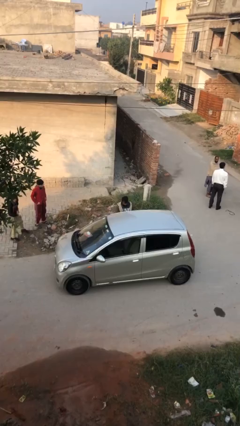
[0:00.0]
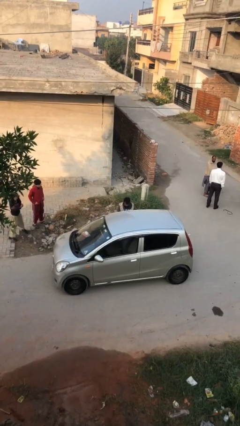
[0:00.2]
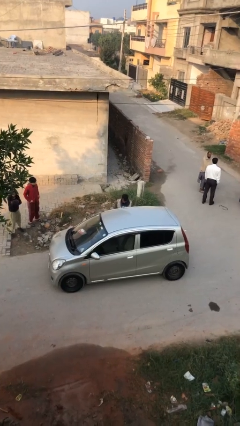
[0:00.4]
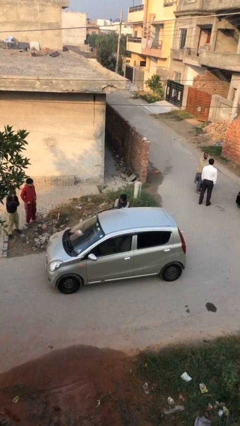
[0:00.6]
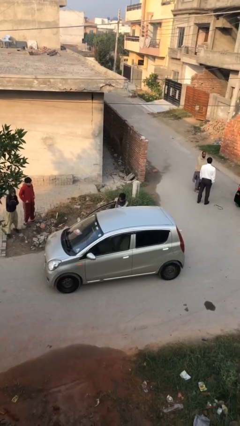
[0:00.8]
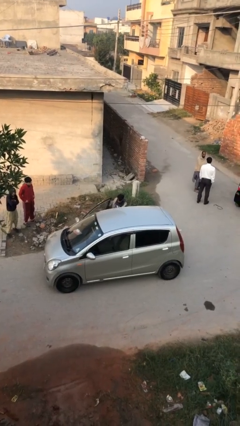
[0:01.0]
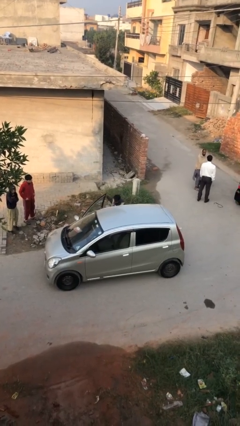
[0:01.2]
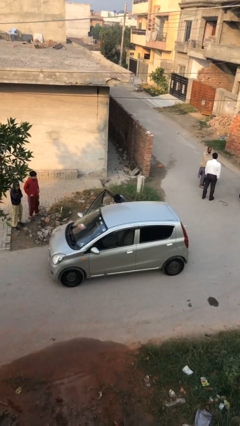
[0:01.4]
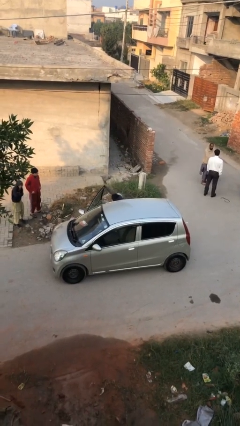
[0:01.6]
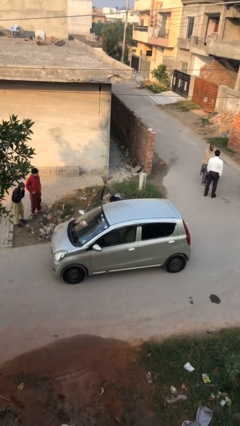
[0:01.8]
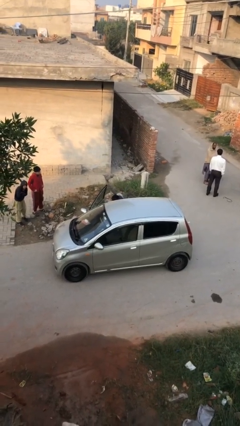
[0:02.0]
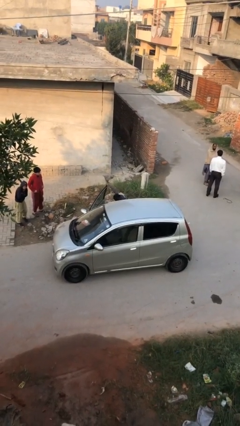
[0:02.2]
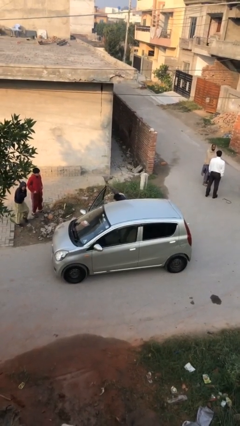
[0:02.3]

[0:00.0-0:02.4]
person opens car door

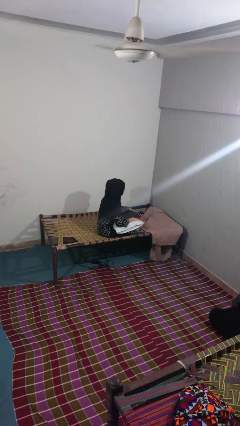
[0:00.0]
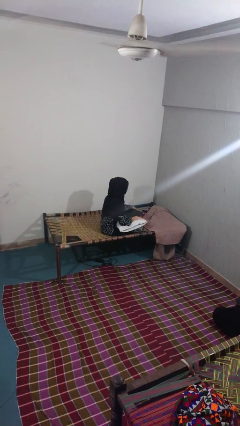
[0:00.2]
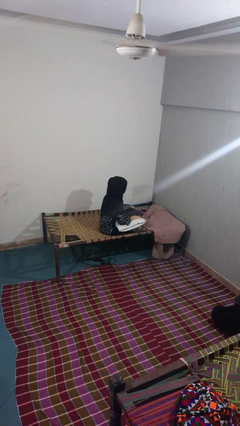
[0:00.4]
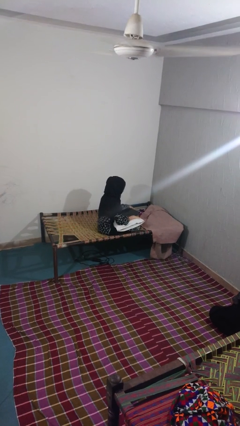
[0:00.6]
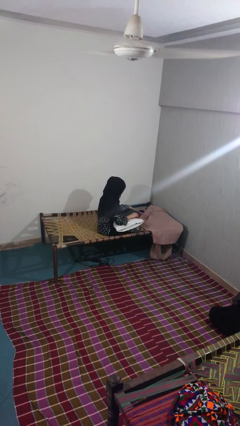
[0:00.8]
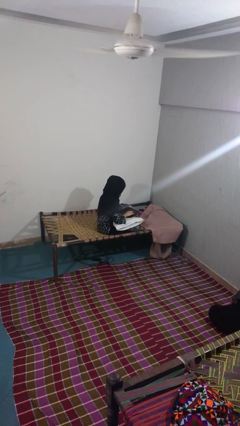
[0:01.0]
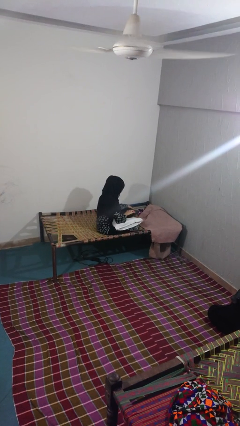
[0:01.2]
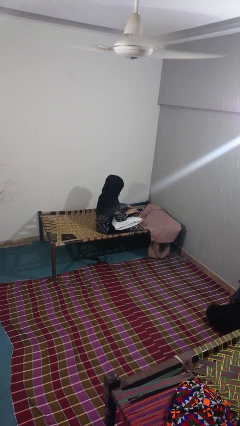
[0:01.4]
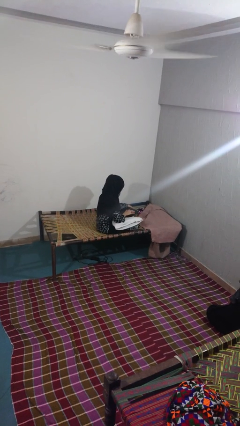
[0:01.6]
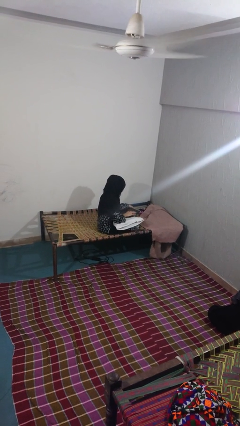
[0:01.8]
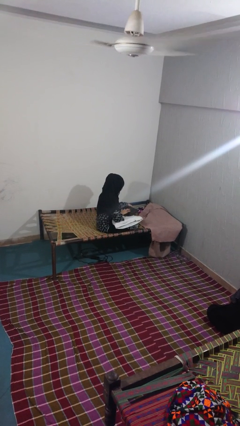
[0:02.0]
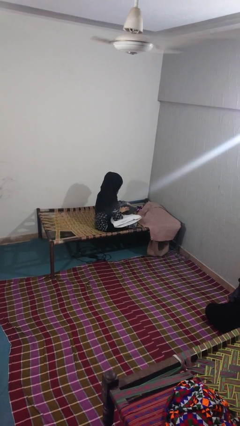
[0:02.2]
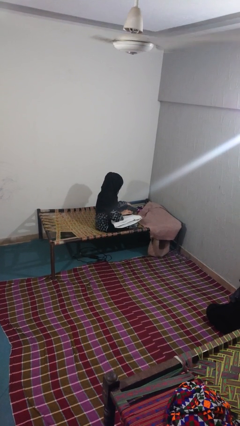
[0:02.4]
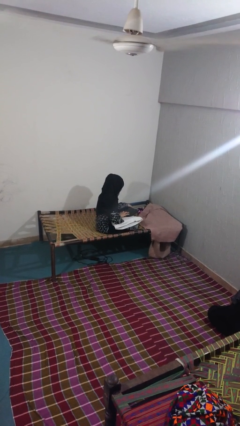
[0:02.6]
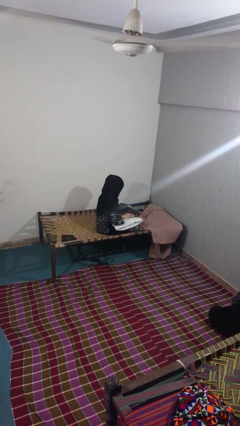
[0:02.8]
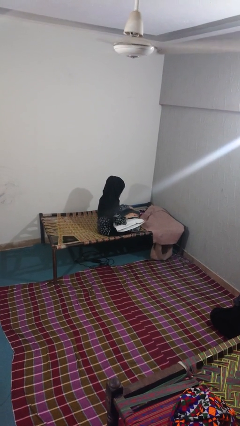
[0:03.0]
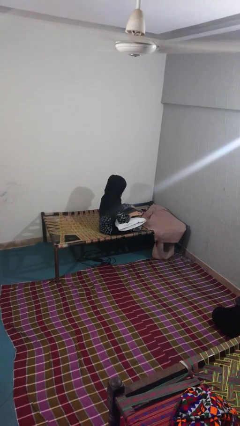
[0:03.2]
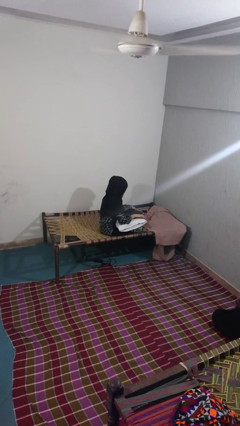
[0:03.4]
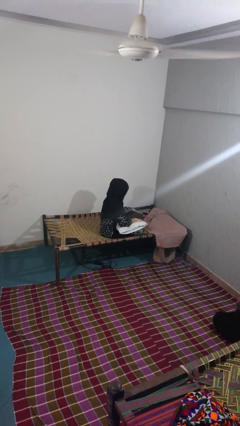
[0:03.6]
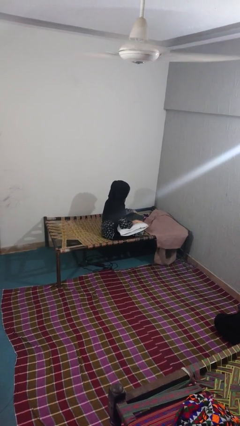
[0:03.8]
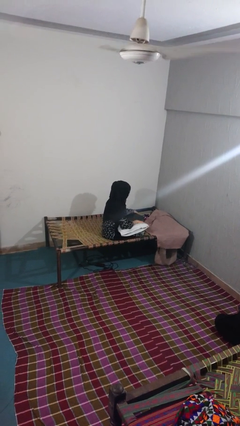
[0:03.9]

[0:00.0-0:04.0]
person interacts with tablet

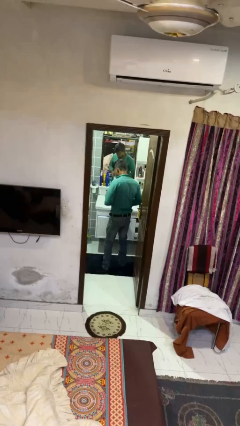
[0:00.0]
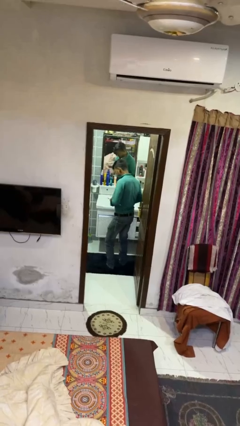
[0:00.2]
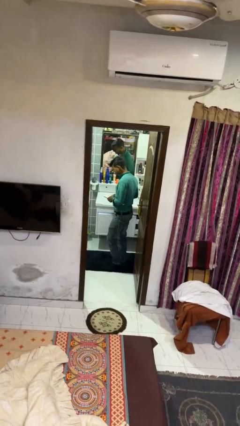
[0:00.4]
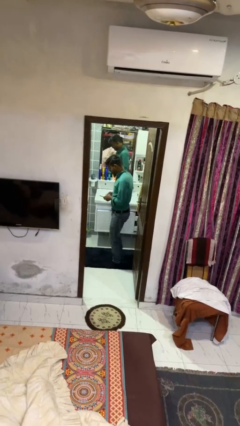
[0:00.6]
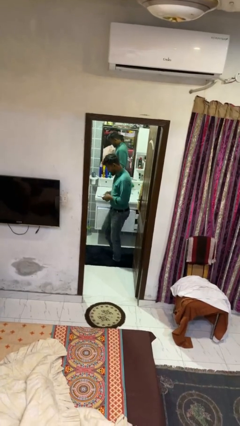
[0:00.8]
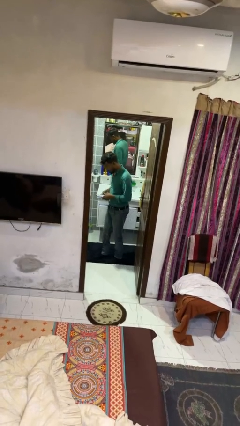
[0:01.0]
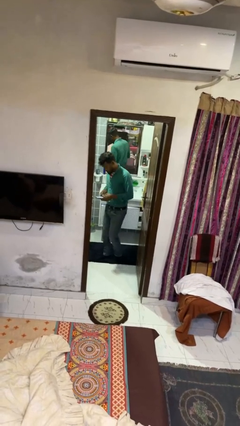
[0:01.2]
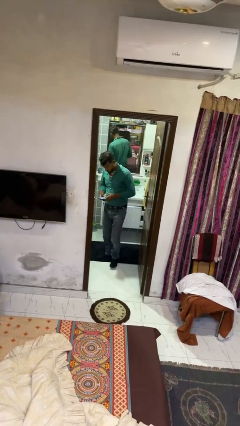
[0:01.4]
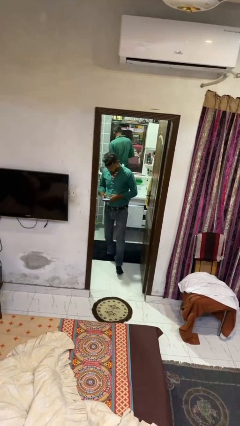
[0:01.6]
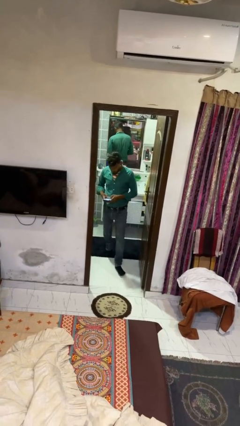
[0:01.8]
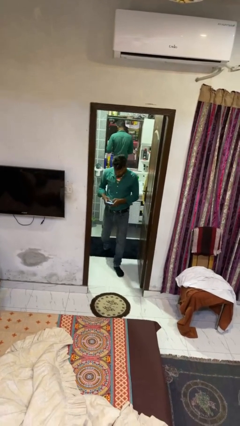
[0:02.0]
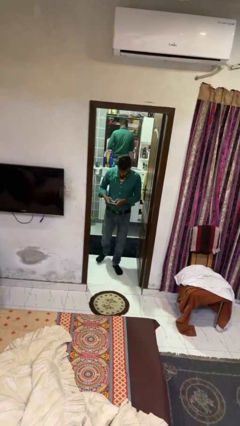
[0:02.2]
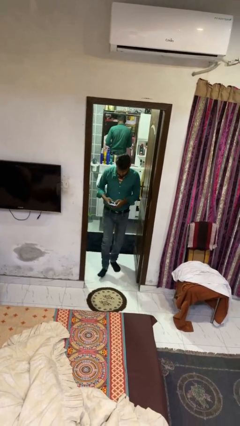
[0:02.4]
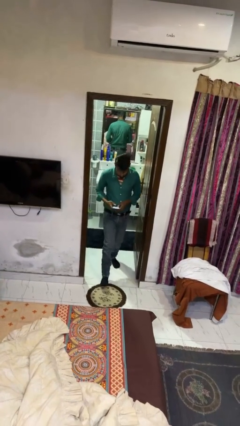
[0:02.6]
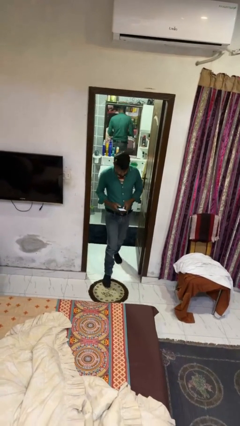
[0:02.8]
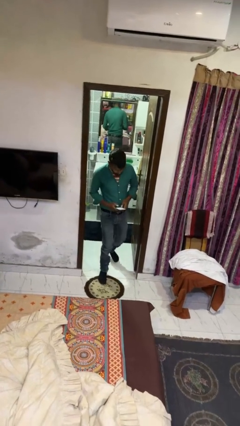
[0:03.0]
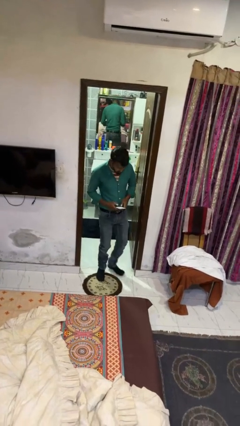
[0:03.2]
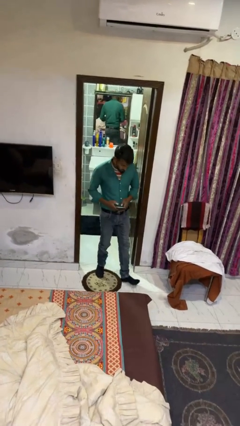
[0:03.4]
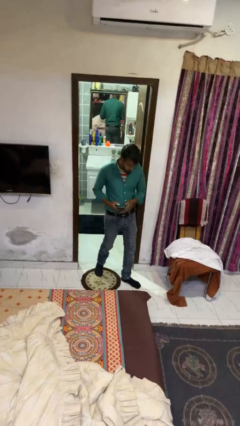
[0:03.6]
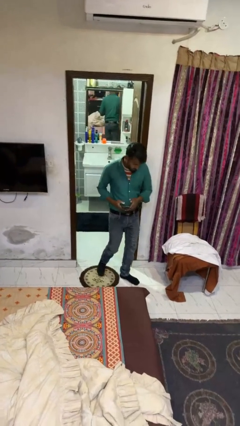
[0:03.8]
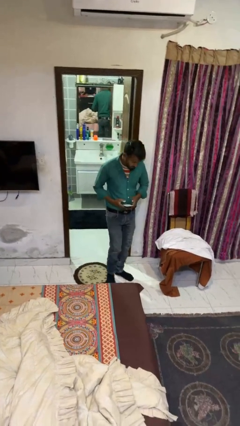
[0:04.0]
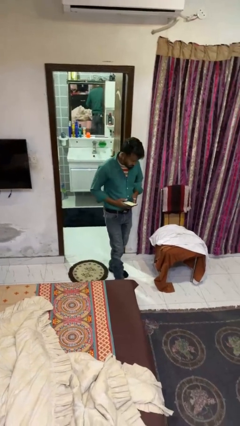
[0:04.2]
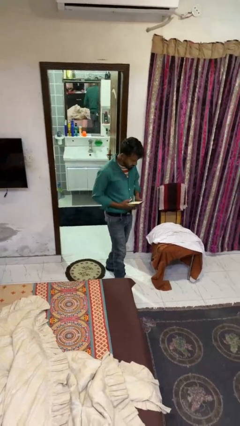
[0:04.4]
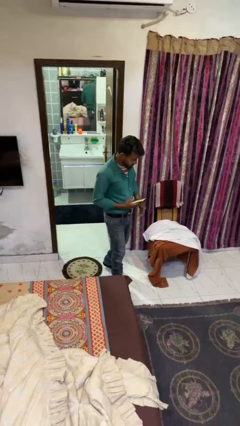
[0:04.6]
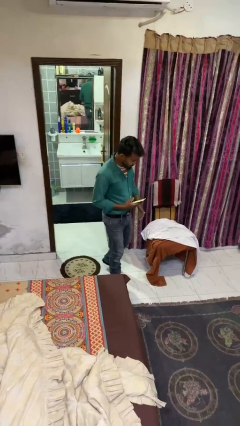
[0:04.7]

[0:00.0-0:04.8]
person enters scene through structure

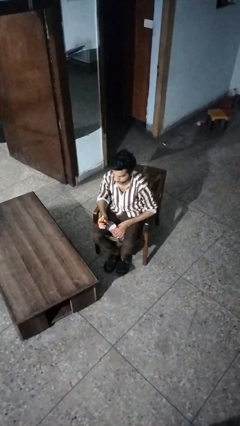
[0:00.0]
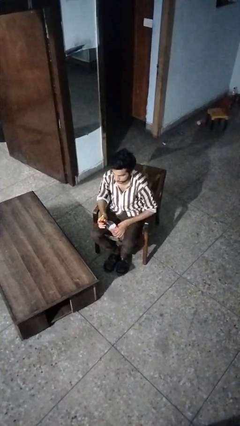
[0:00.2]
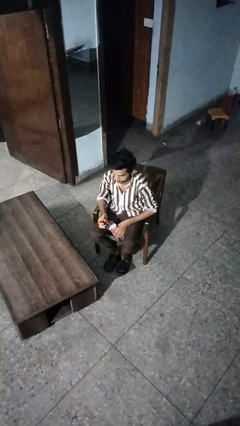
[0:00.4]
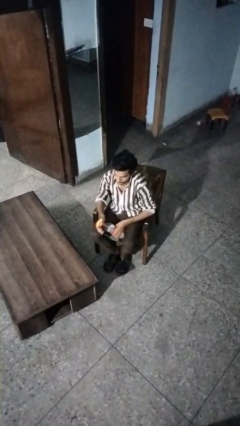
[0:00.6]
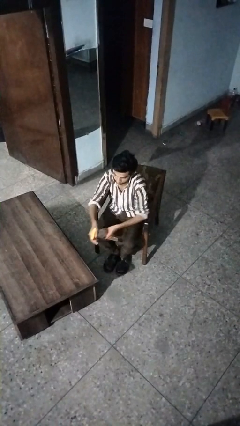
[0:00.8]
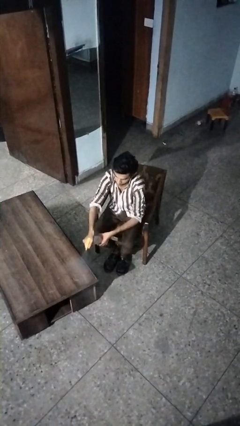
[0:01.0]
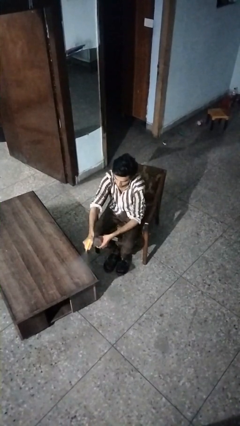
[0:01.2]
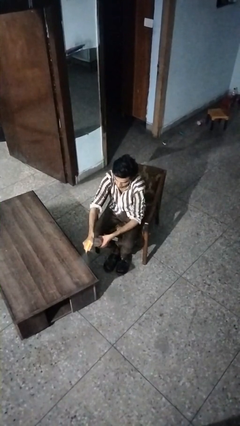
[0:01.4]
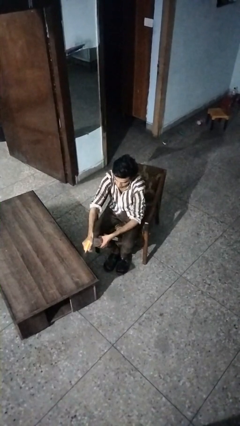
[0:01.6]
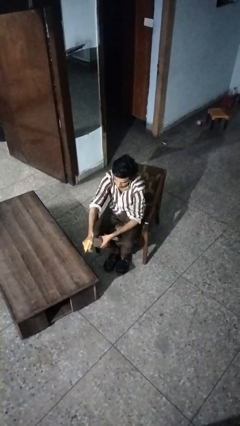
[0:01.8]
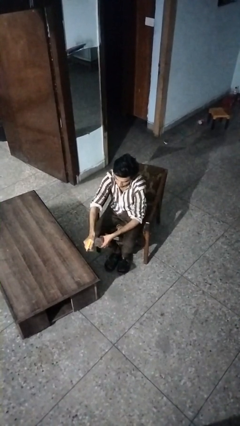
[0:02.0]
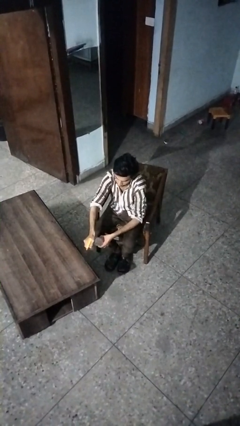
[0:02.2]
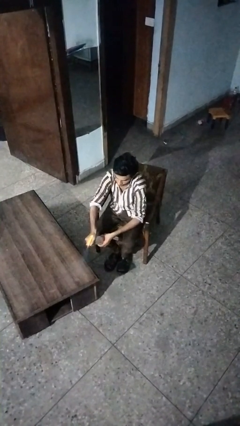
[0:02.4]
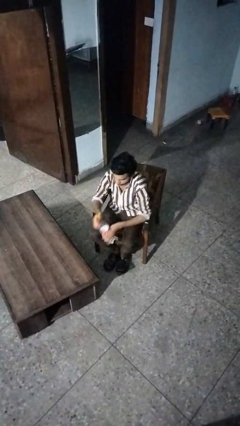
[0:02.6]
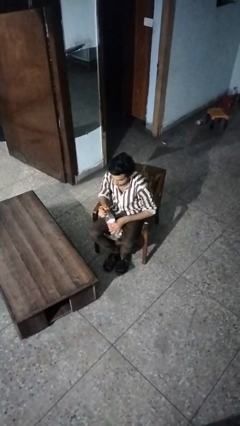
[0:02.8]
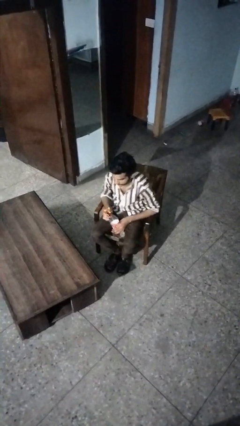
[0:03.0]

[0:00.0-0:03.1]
person sprays from bottle

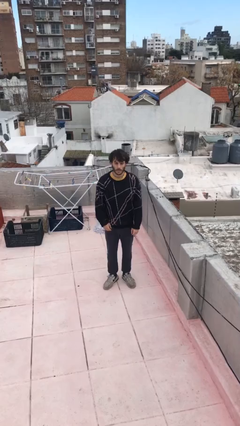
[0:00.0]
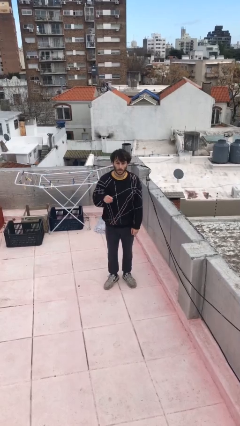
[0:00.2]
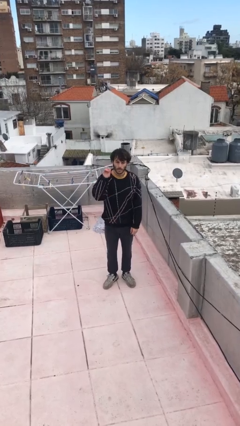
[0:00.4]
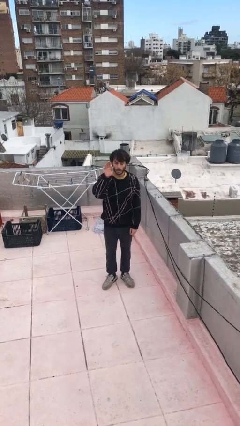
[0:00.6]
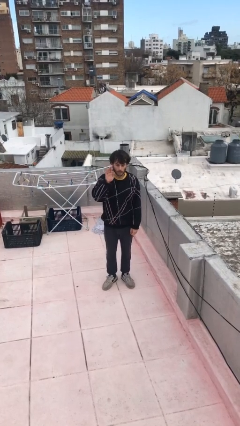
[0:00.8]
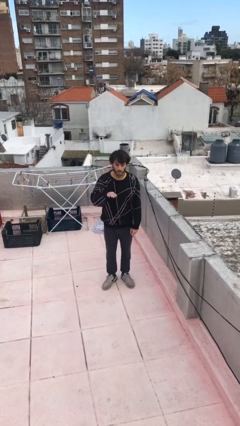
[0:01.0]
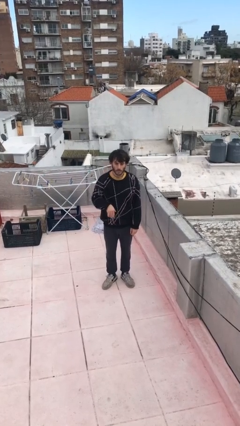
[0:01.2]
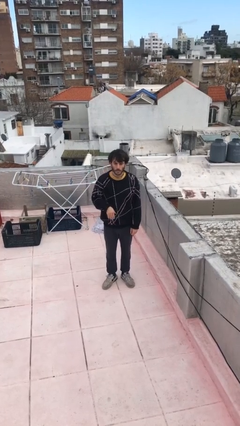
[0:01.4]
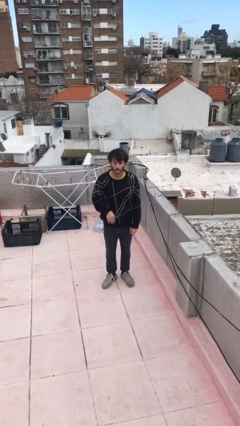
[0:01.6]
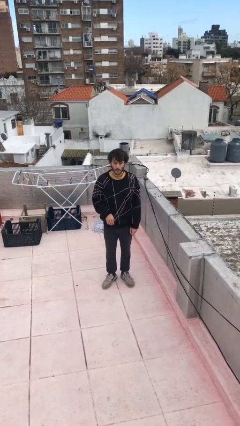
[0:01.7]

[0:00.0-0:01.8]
person gestures swipe down

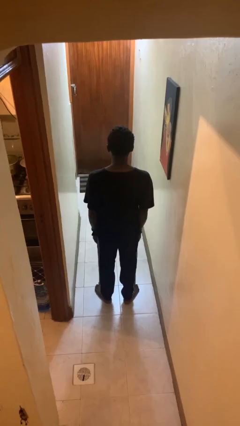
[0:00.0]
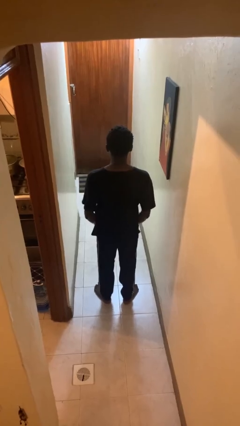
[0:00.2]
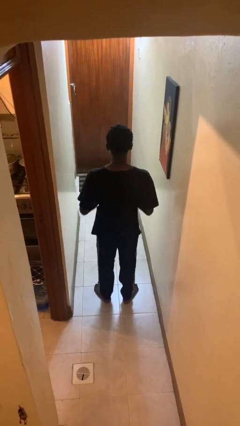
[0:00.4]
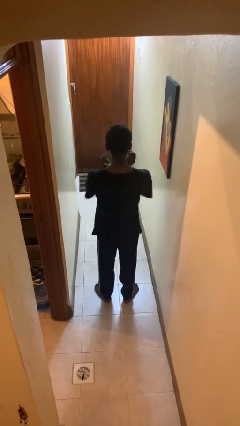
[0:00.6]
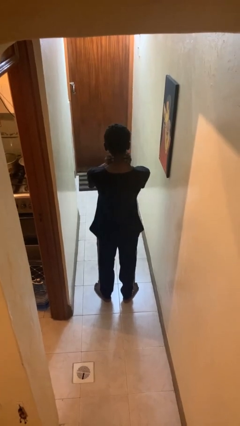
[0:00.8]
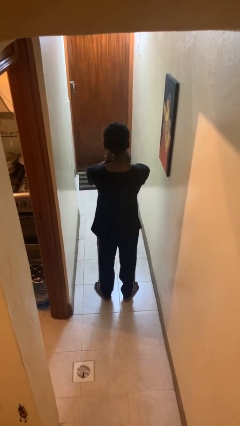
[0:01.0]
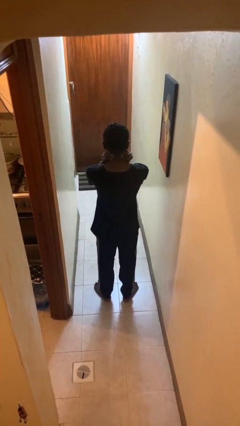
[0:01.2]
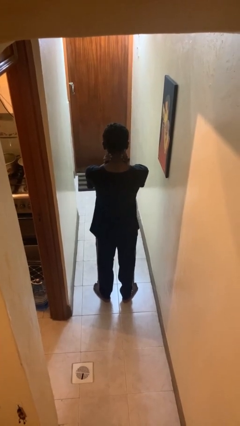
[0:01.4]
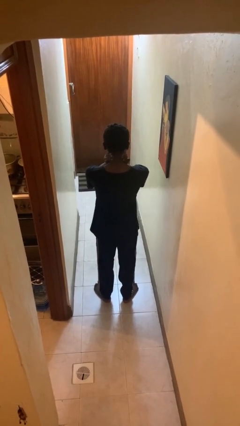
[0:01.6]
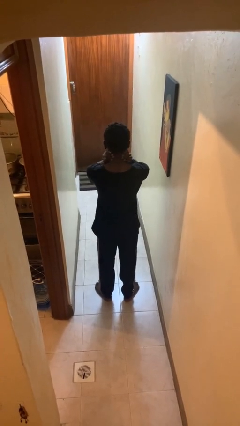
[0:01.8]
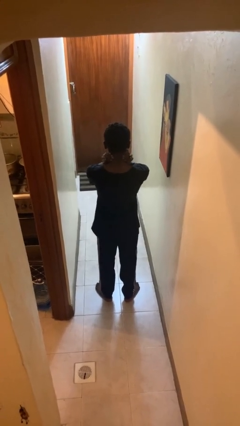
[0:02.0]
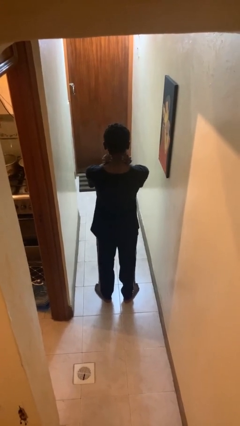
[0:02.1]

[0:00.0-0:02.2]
person rubs neck
